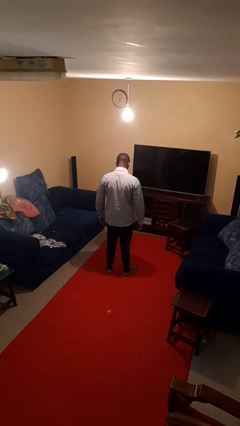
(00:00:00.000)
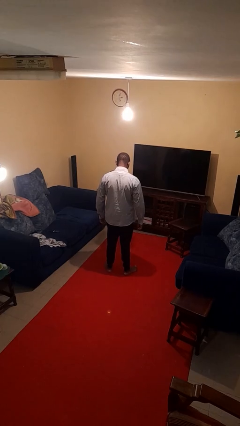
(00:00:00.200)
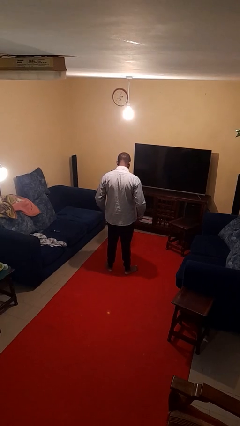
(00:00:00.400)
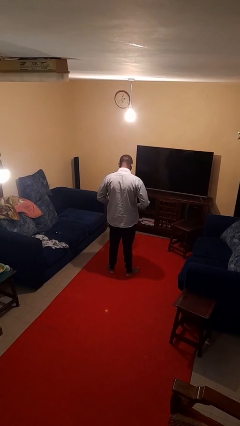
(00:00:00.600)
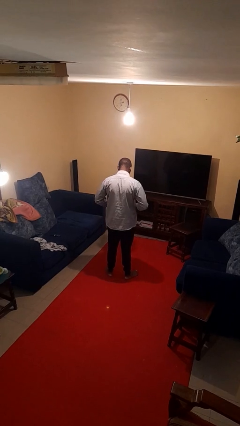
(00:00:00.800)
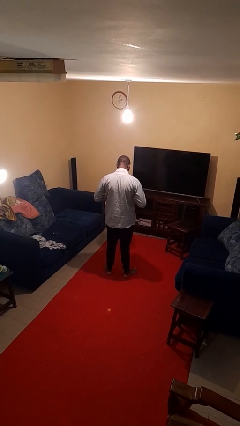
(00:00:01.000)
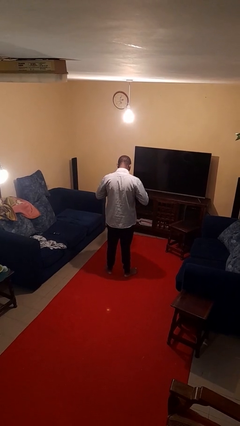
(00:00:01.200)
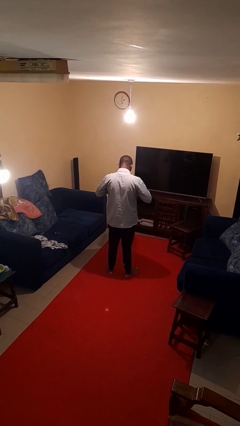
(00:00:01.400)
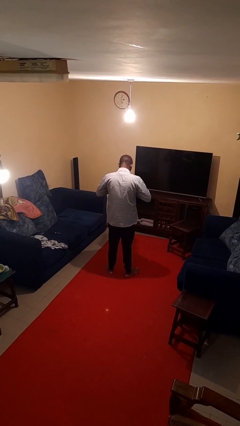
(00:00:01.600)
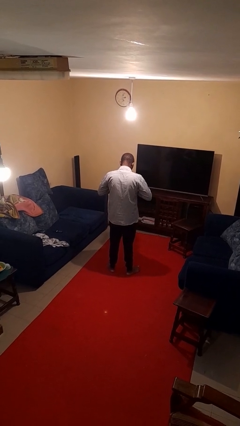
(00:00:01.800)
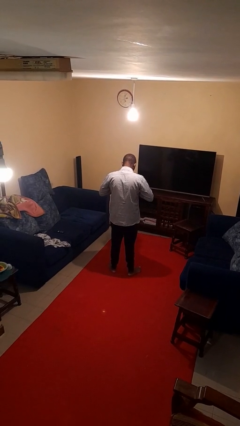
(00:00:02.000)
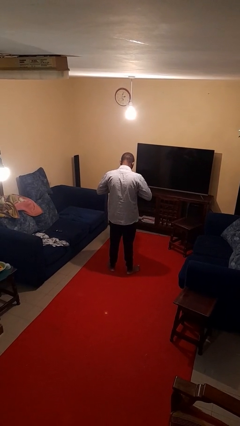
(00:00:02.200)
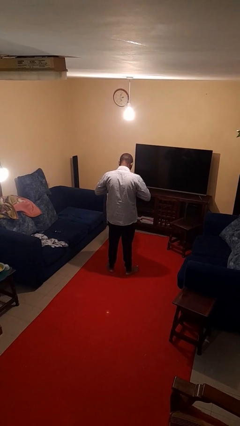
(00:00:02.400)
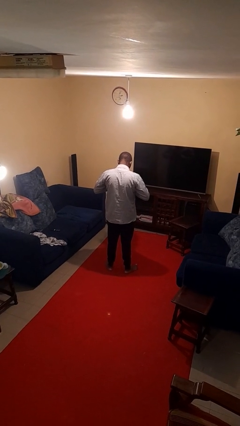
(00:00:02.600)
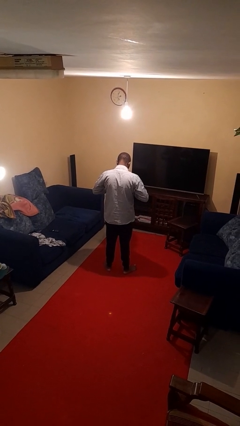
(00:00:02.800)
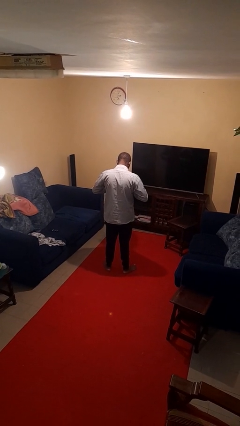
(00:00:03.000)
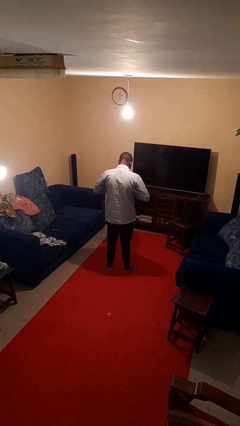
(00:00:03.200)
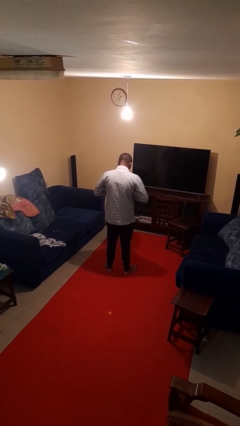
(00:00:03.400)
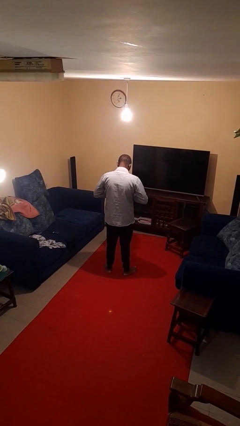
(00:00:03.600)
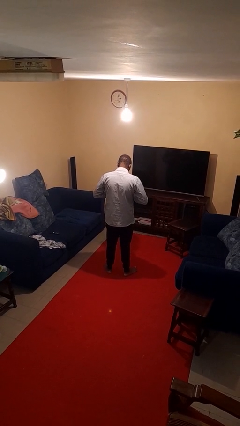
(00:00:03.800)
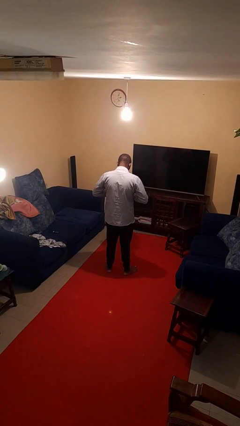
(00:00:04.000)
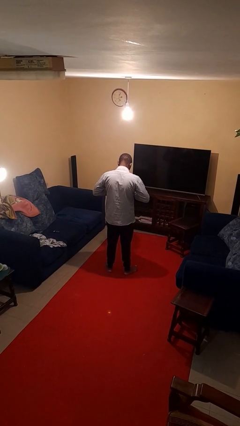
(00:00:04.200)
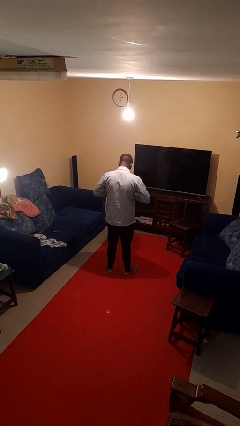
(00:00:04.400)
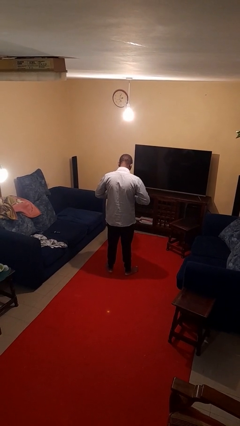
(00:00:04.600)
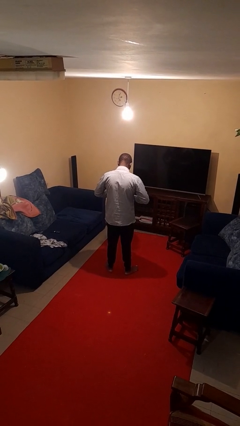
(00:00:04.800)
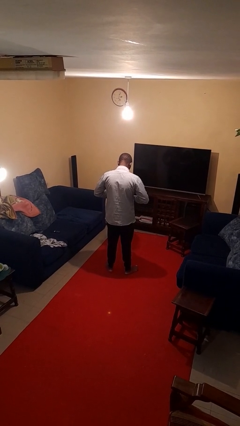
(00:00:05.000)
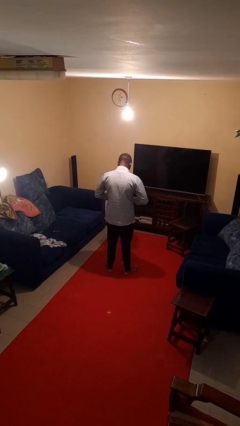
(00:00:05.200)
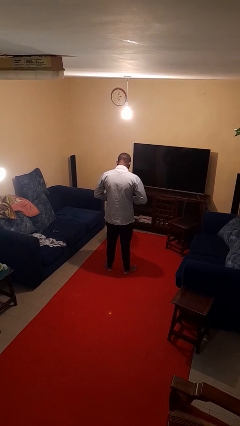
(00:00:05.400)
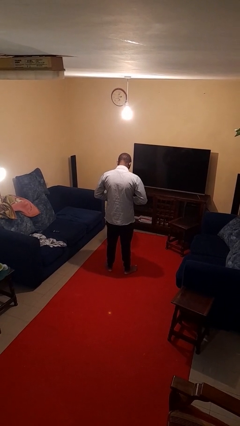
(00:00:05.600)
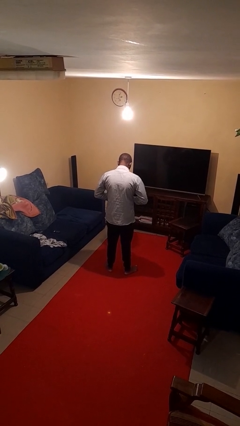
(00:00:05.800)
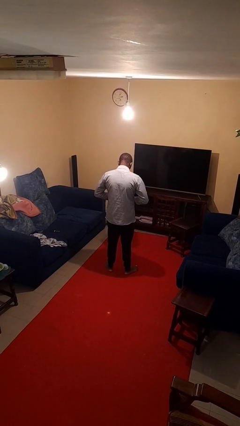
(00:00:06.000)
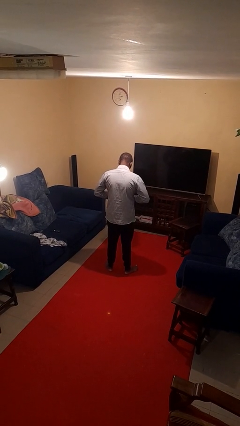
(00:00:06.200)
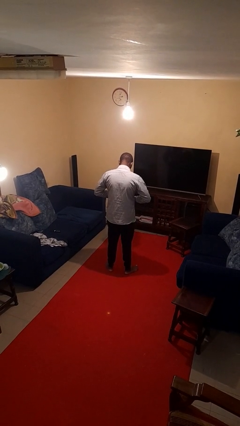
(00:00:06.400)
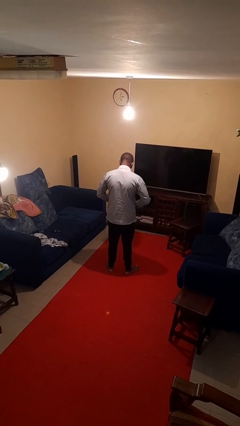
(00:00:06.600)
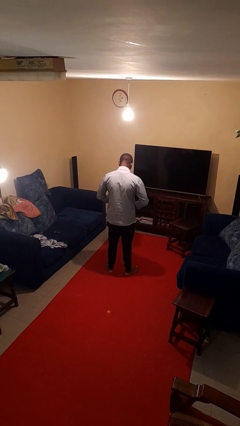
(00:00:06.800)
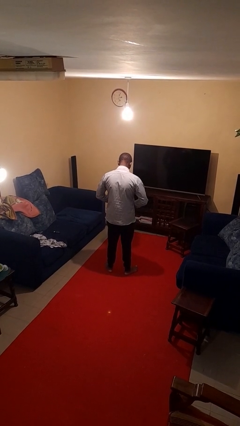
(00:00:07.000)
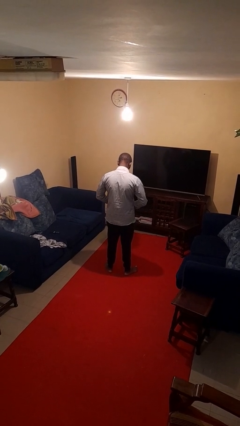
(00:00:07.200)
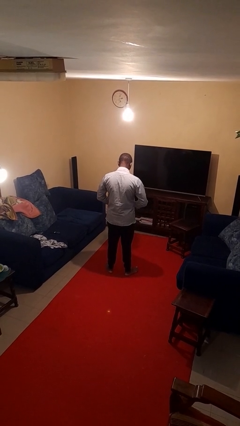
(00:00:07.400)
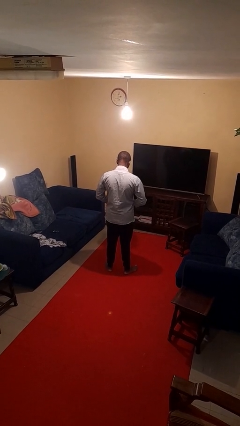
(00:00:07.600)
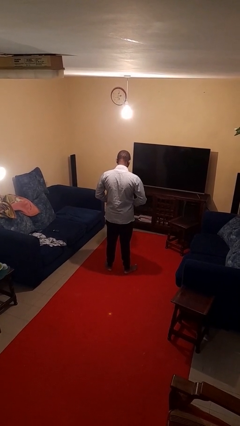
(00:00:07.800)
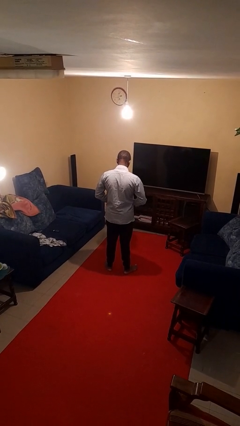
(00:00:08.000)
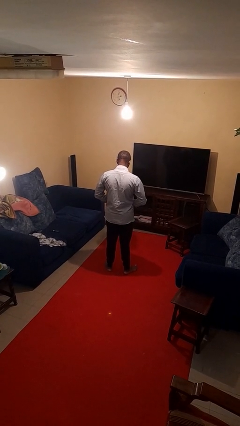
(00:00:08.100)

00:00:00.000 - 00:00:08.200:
person buttons shirt

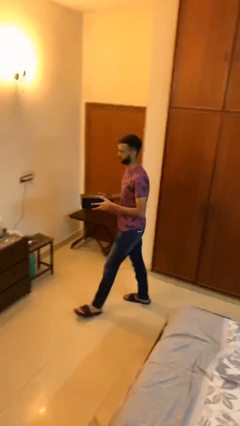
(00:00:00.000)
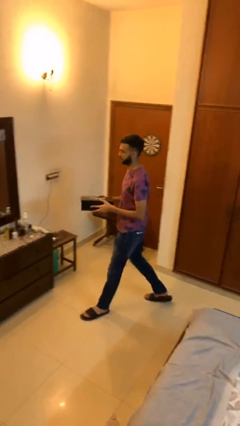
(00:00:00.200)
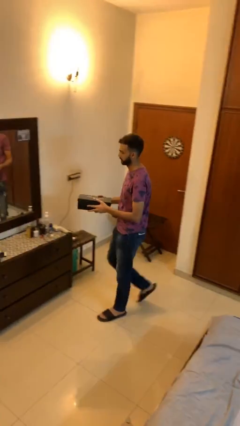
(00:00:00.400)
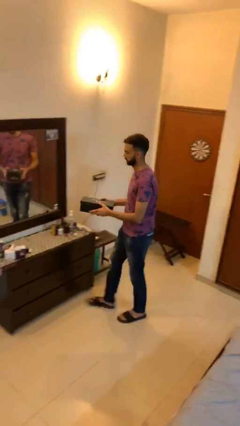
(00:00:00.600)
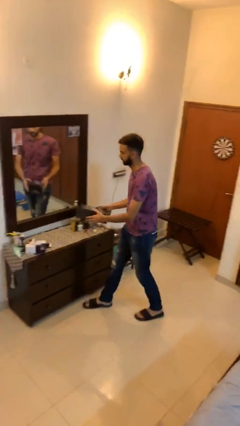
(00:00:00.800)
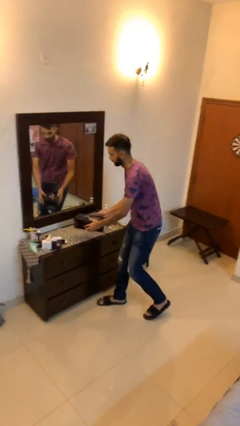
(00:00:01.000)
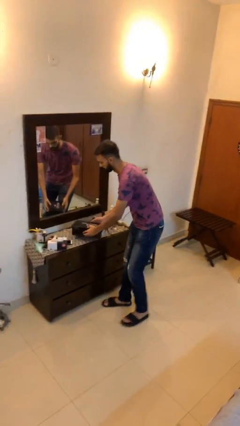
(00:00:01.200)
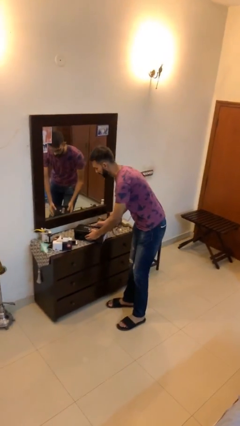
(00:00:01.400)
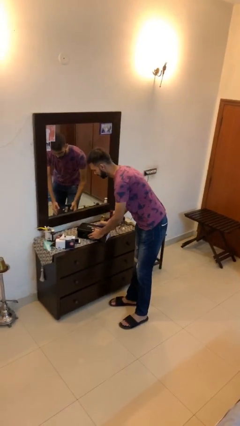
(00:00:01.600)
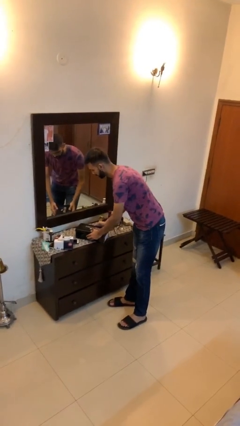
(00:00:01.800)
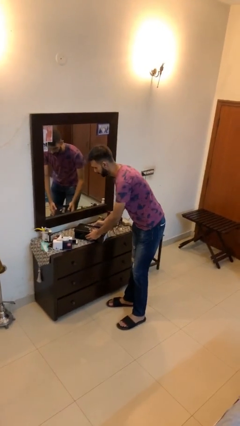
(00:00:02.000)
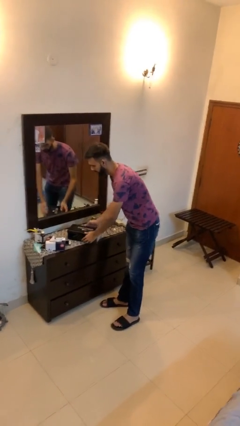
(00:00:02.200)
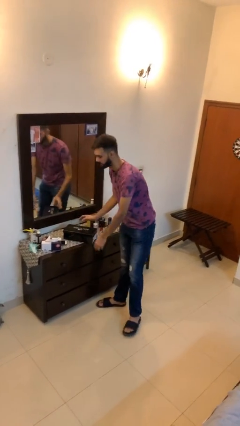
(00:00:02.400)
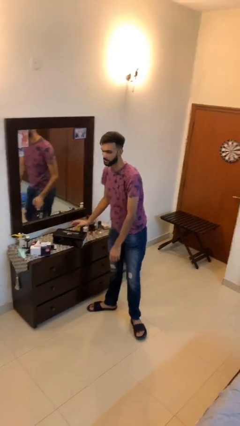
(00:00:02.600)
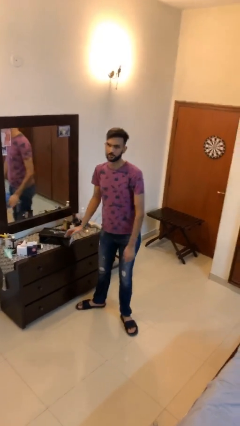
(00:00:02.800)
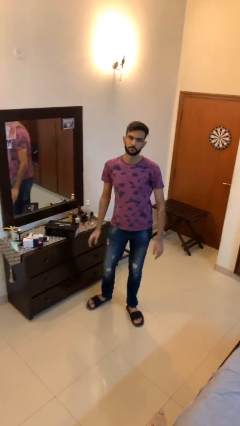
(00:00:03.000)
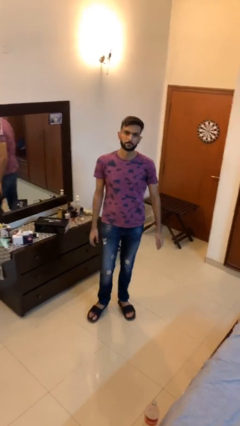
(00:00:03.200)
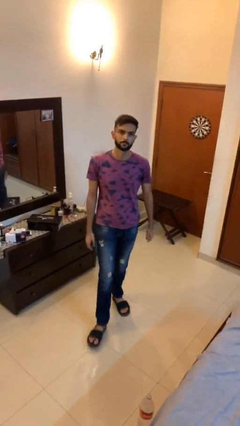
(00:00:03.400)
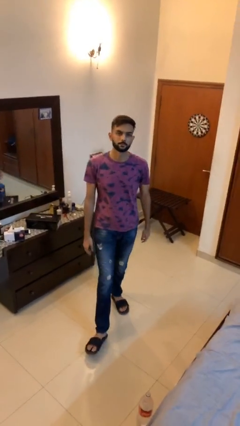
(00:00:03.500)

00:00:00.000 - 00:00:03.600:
person puts down object on table

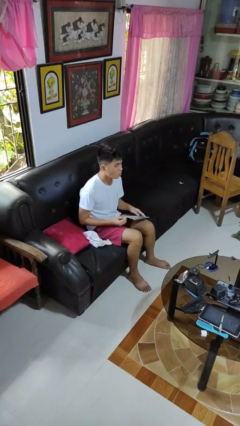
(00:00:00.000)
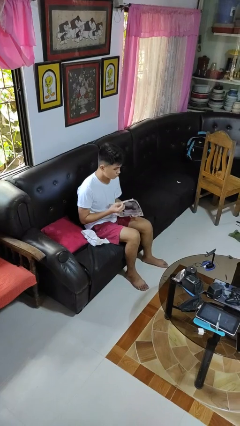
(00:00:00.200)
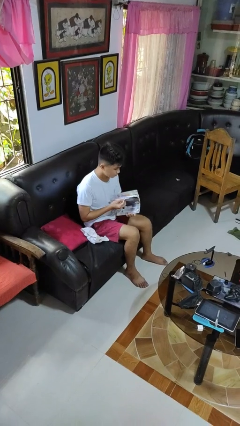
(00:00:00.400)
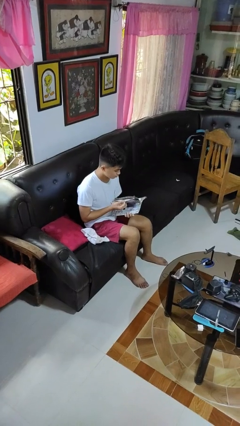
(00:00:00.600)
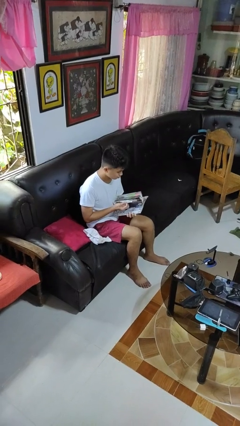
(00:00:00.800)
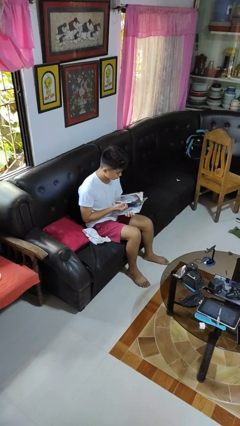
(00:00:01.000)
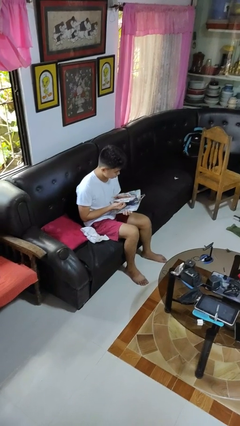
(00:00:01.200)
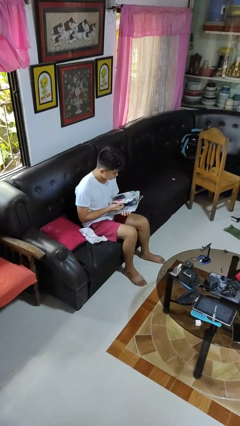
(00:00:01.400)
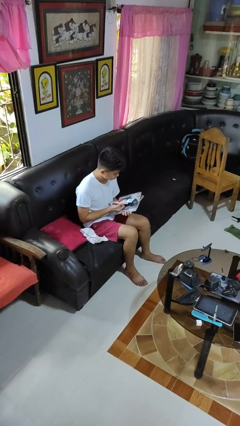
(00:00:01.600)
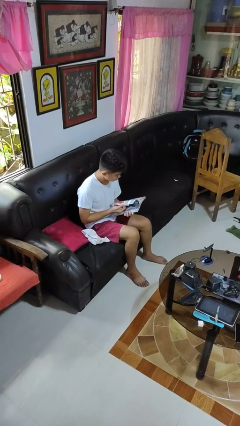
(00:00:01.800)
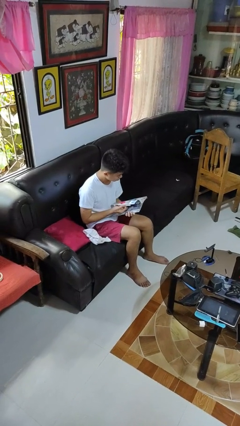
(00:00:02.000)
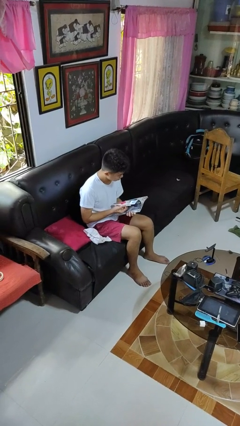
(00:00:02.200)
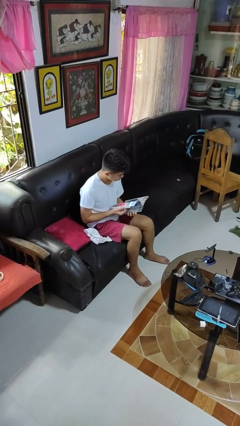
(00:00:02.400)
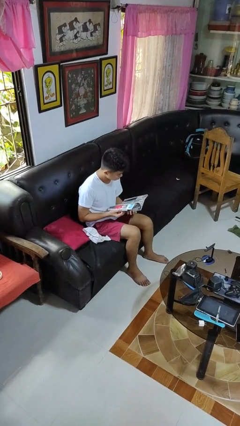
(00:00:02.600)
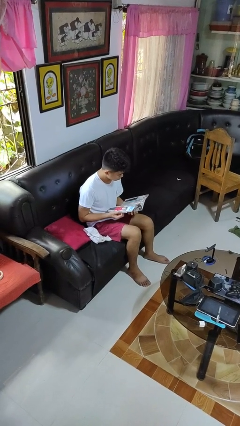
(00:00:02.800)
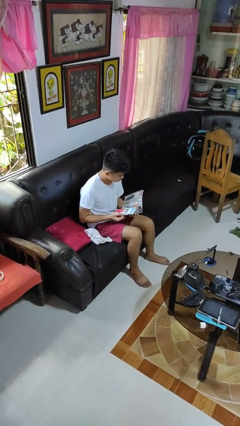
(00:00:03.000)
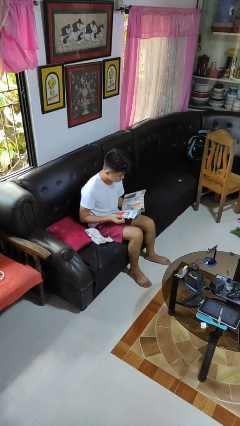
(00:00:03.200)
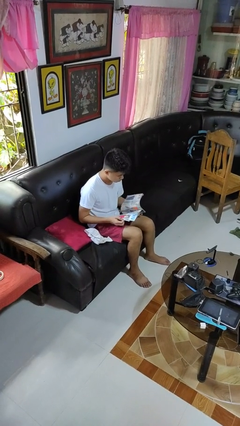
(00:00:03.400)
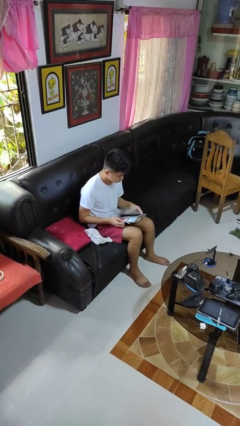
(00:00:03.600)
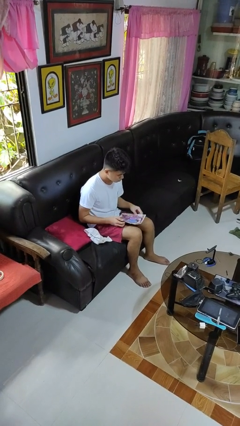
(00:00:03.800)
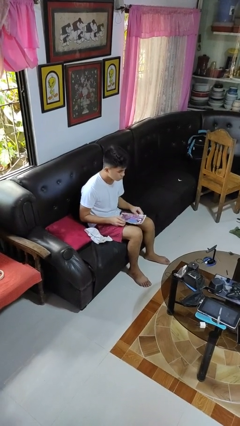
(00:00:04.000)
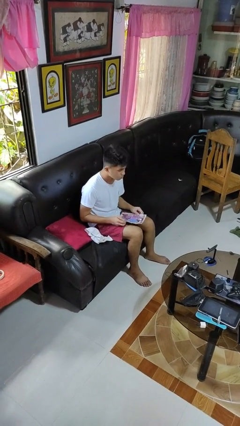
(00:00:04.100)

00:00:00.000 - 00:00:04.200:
person reads magazine

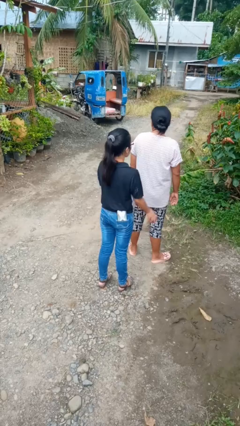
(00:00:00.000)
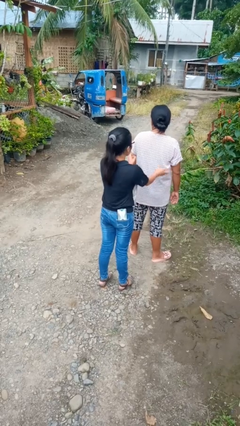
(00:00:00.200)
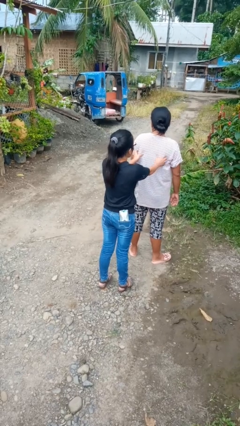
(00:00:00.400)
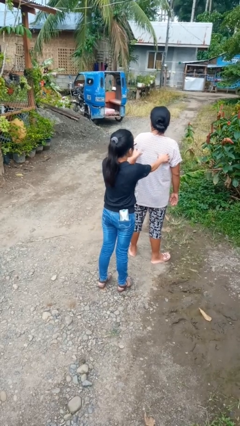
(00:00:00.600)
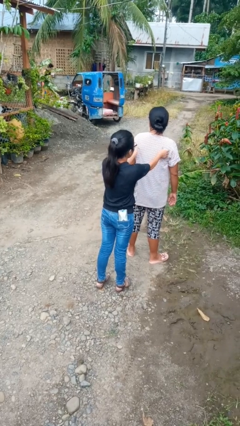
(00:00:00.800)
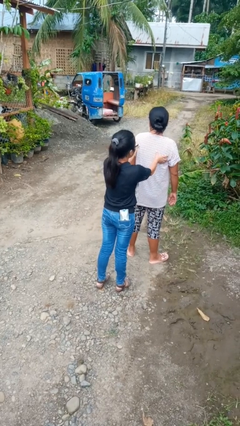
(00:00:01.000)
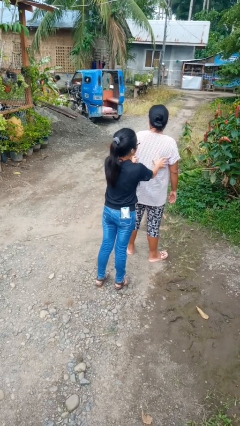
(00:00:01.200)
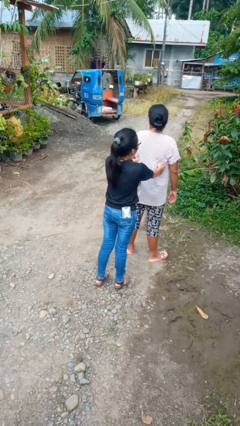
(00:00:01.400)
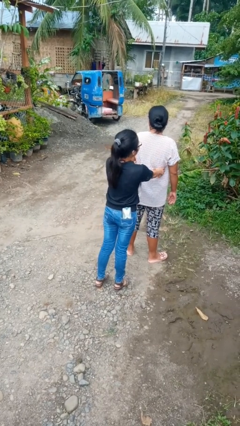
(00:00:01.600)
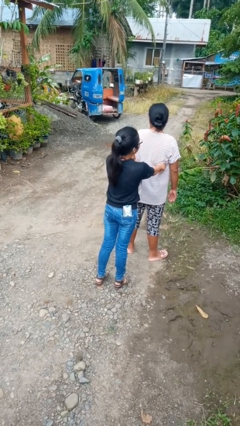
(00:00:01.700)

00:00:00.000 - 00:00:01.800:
person tickles person
